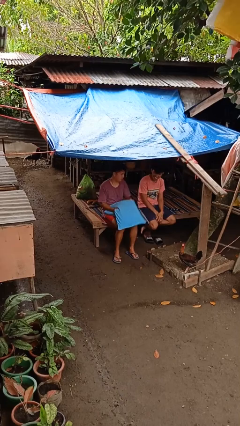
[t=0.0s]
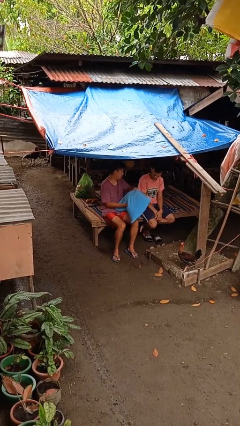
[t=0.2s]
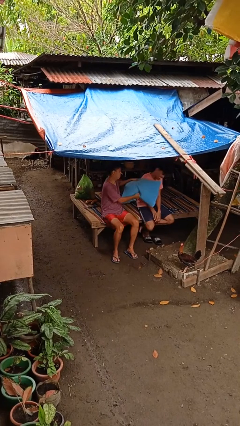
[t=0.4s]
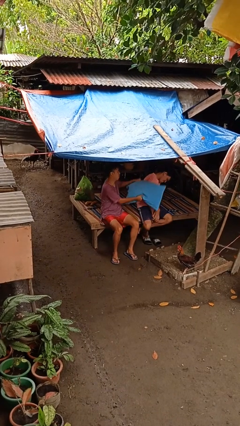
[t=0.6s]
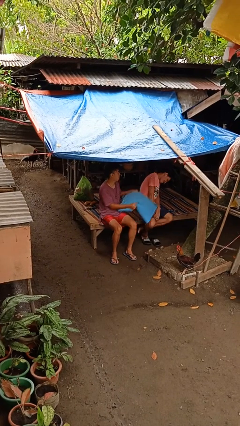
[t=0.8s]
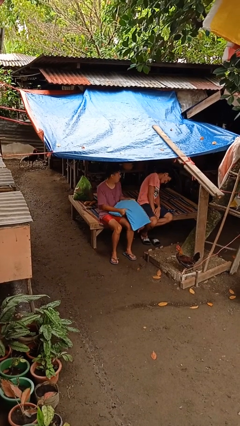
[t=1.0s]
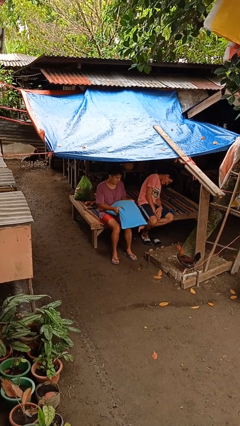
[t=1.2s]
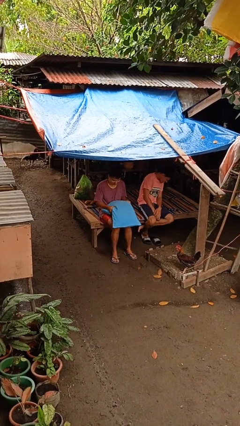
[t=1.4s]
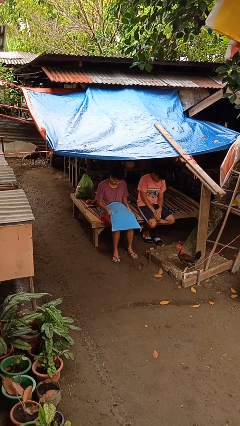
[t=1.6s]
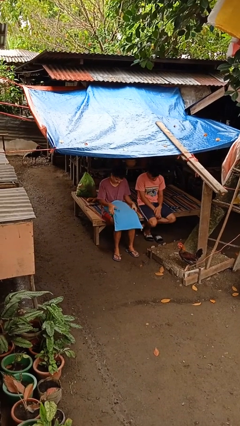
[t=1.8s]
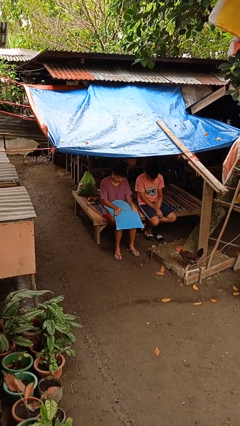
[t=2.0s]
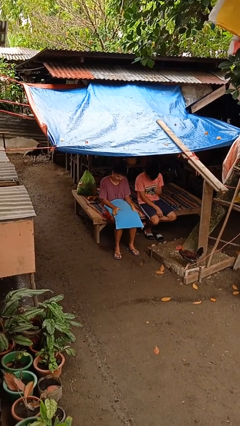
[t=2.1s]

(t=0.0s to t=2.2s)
person hits person with pillow

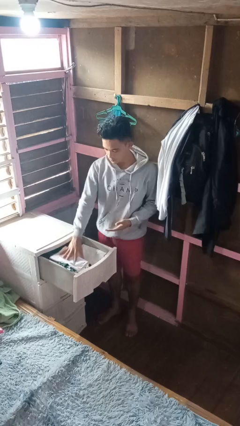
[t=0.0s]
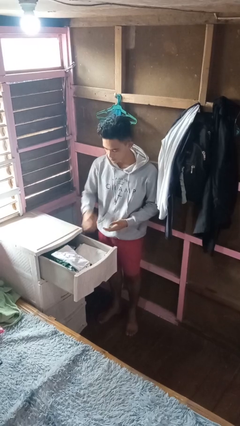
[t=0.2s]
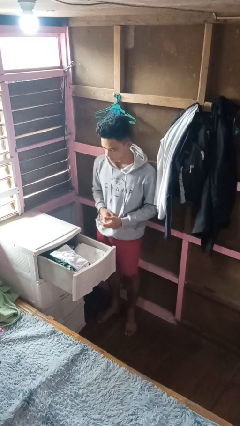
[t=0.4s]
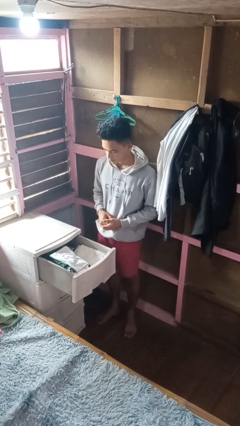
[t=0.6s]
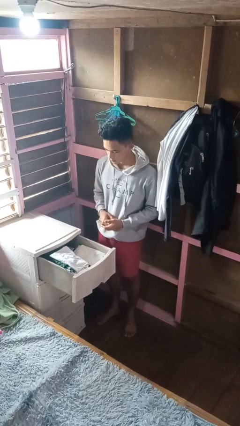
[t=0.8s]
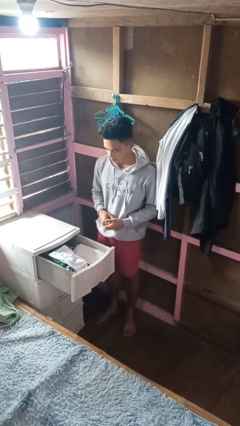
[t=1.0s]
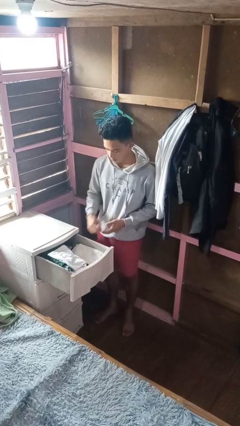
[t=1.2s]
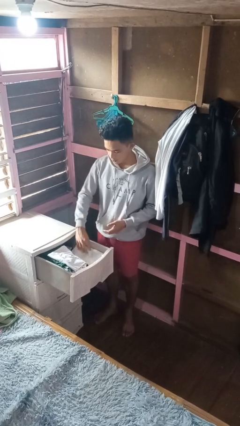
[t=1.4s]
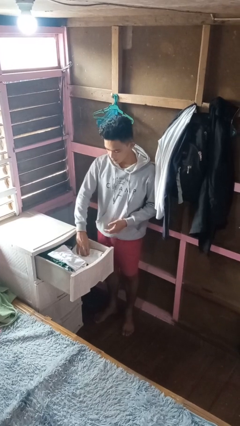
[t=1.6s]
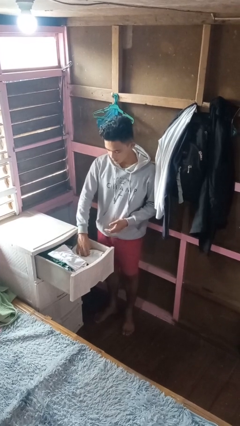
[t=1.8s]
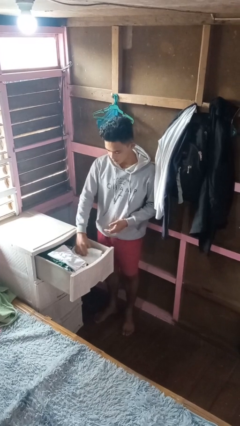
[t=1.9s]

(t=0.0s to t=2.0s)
person puts clothes into dresser

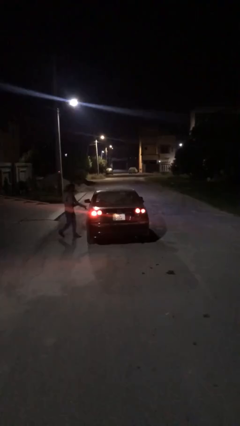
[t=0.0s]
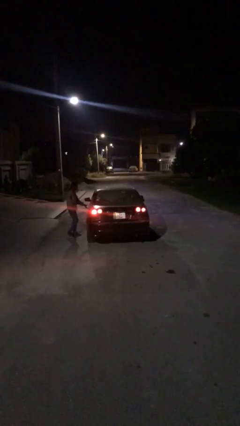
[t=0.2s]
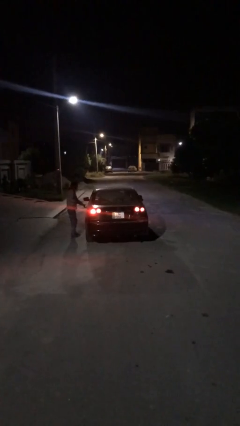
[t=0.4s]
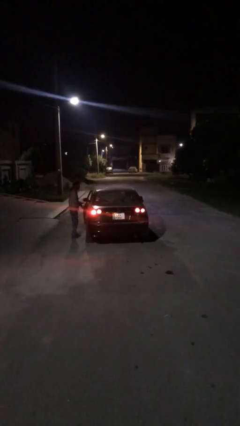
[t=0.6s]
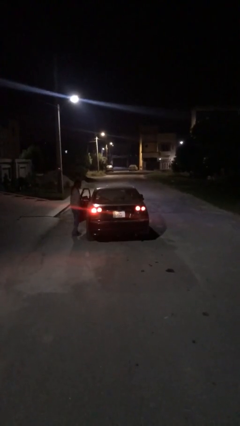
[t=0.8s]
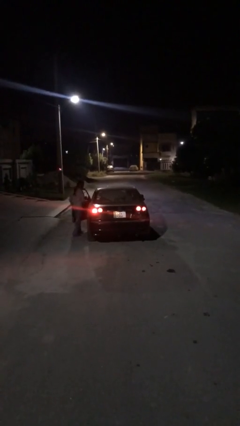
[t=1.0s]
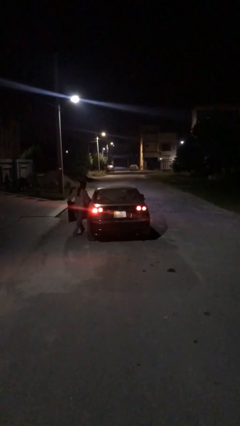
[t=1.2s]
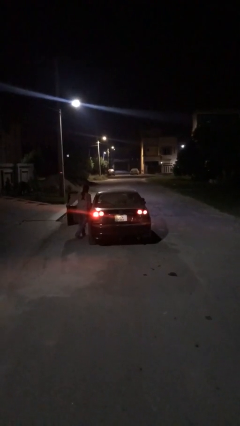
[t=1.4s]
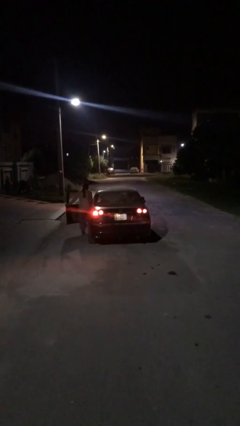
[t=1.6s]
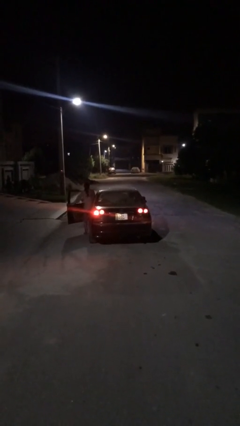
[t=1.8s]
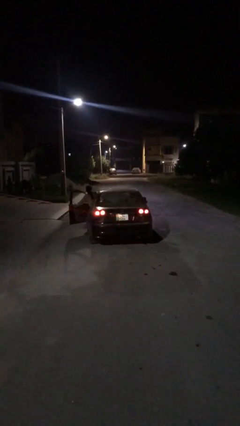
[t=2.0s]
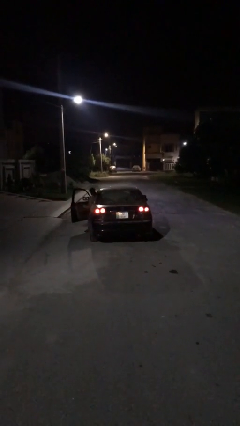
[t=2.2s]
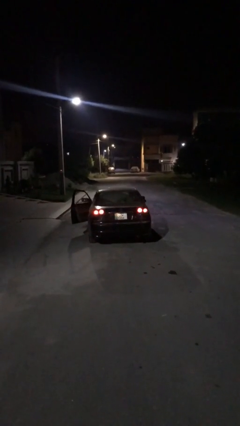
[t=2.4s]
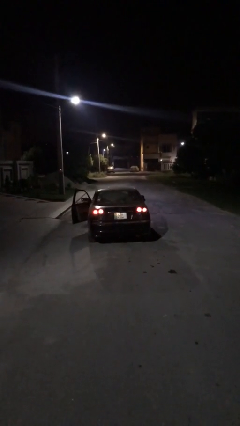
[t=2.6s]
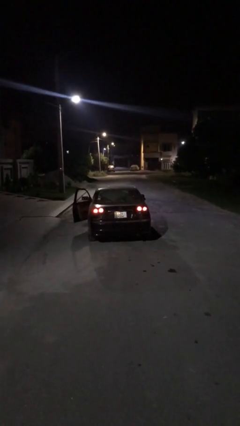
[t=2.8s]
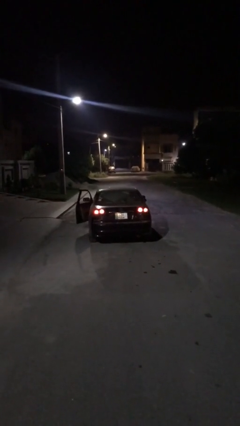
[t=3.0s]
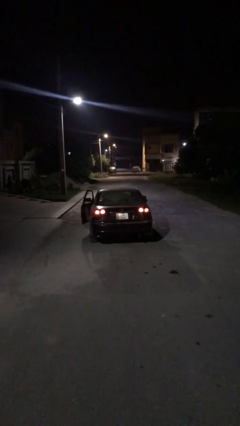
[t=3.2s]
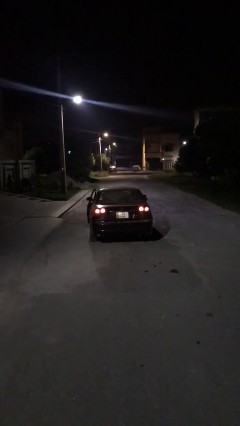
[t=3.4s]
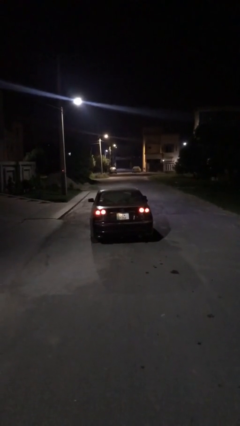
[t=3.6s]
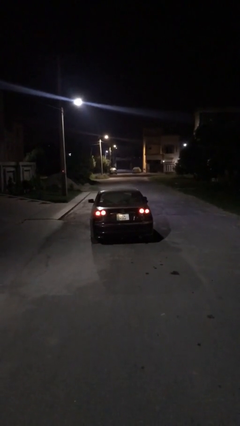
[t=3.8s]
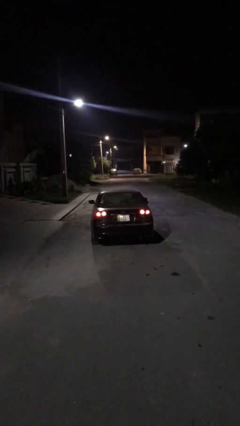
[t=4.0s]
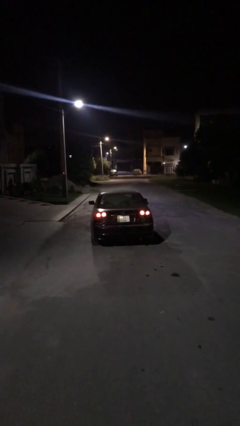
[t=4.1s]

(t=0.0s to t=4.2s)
car picks up person

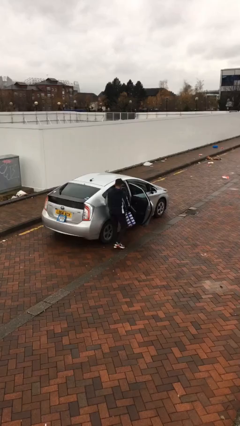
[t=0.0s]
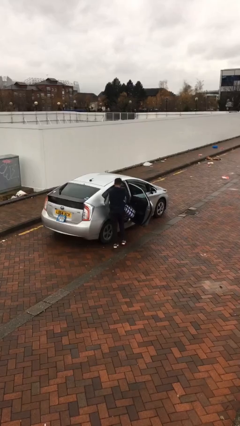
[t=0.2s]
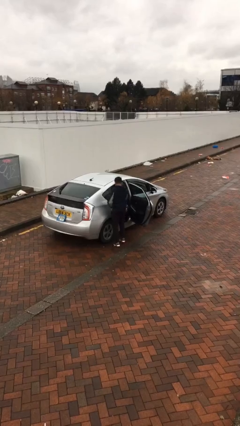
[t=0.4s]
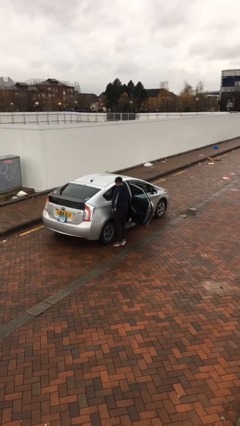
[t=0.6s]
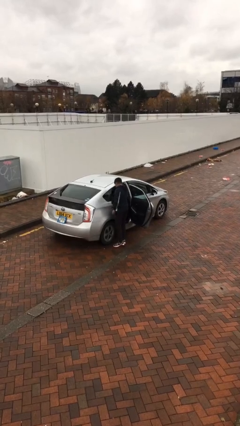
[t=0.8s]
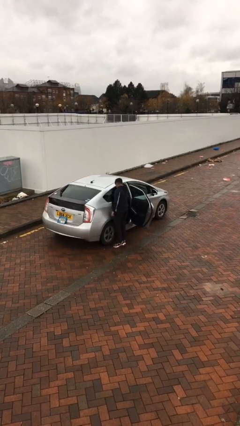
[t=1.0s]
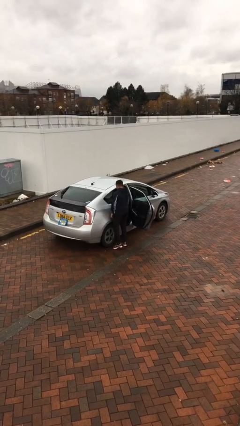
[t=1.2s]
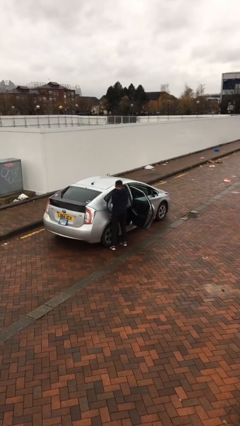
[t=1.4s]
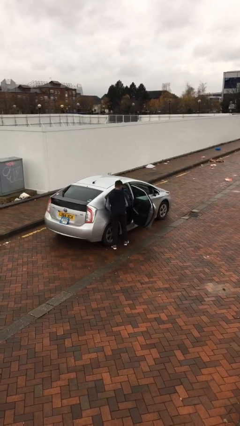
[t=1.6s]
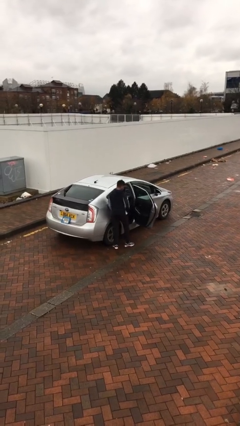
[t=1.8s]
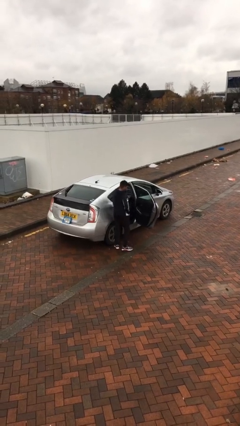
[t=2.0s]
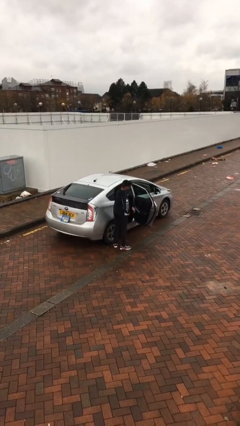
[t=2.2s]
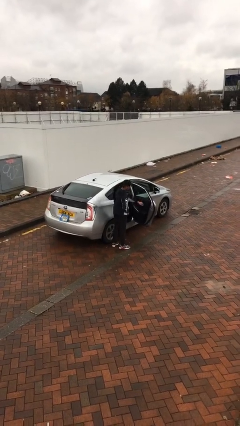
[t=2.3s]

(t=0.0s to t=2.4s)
person loads car

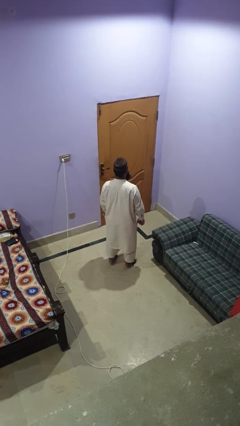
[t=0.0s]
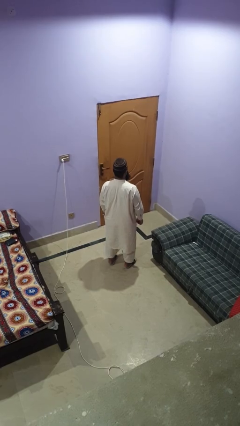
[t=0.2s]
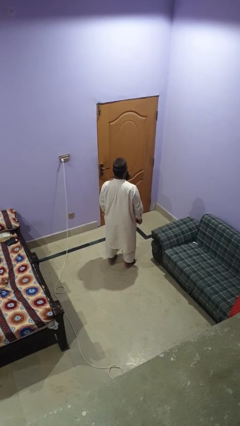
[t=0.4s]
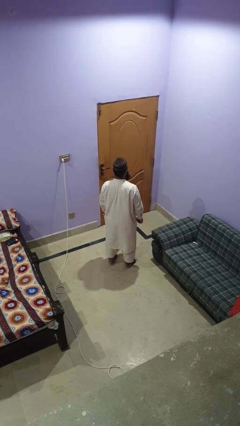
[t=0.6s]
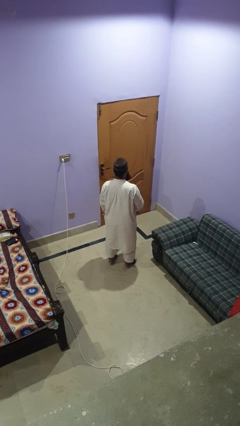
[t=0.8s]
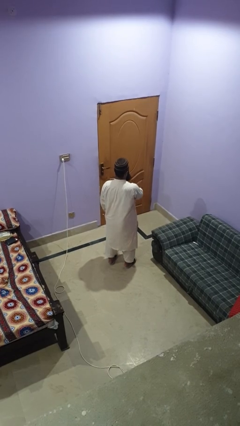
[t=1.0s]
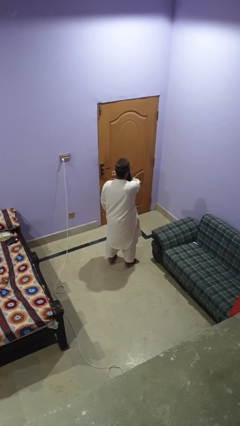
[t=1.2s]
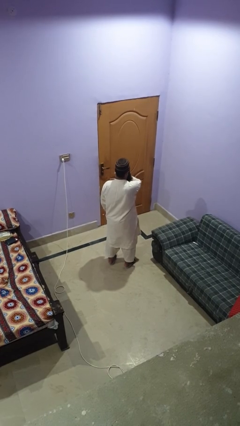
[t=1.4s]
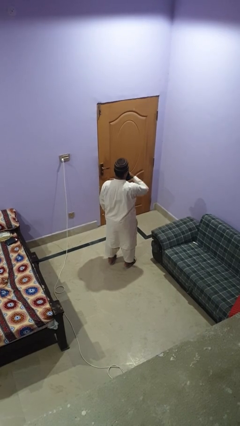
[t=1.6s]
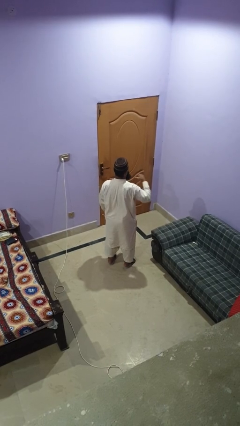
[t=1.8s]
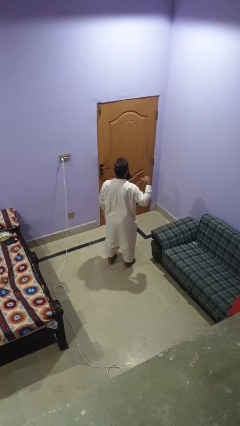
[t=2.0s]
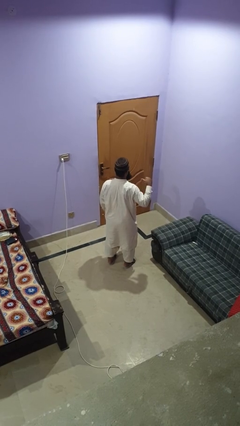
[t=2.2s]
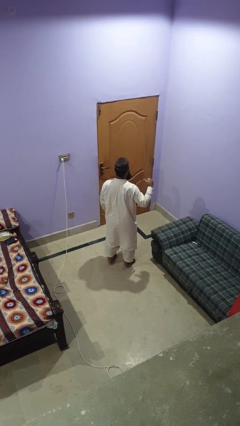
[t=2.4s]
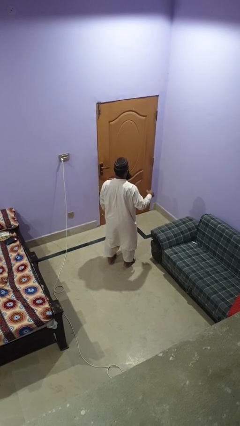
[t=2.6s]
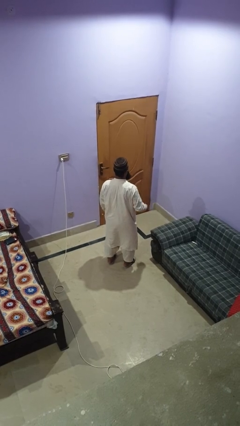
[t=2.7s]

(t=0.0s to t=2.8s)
person gestures cut

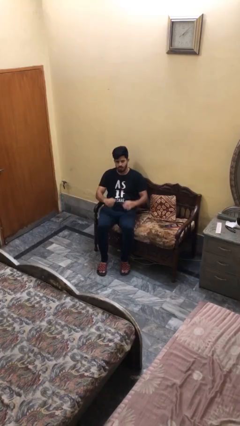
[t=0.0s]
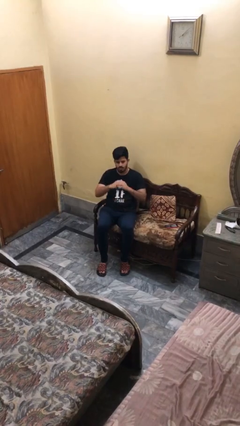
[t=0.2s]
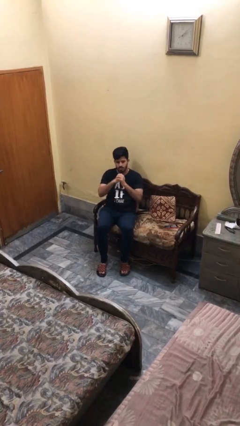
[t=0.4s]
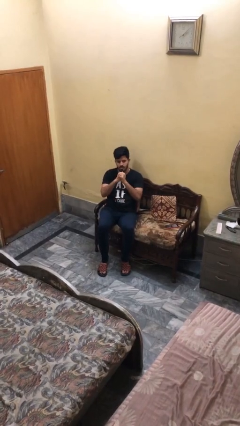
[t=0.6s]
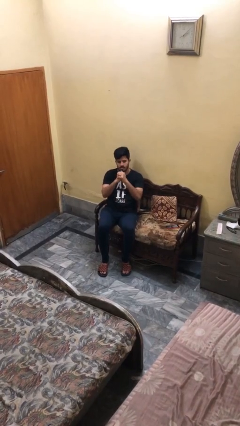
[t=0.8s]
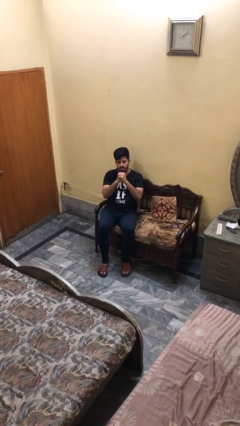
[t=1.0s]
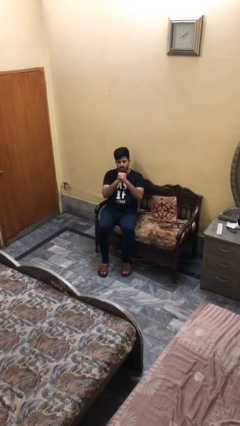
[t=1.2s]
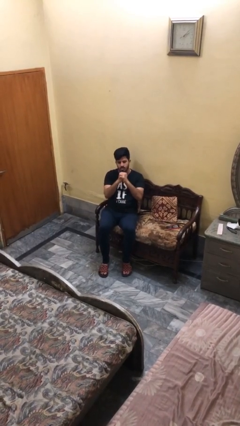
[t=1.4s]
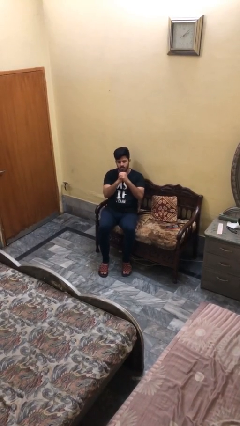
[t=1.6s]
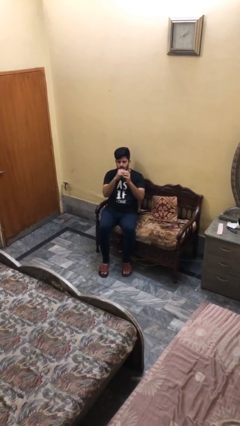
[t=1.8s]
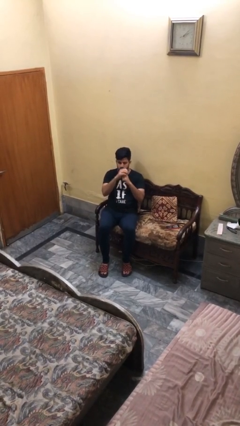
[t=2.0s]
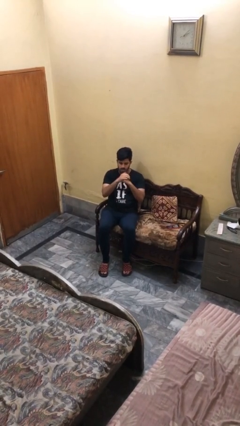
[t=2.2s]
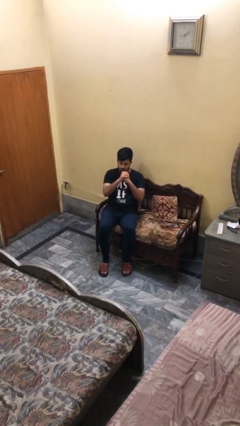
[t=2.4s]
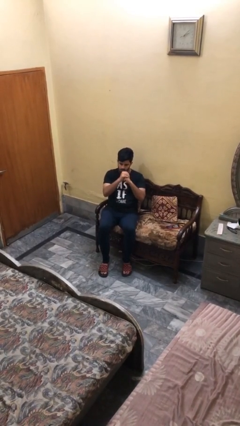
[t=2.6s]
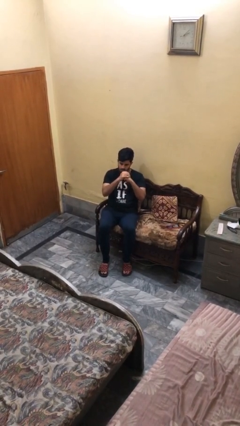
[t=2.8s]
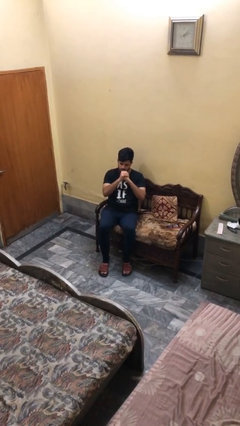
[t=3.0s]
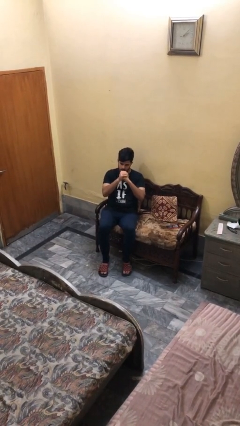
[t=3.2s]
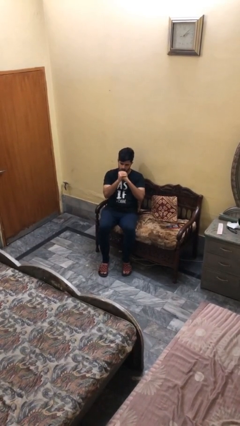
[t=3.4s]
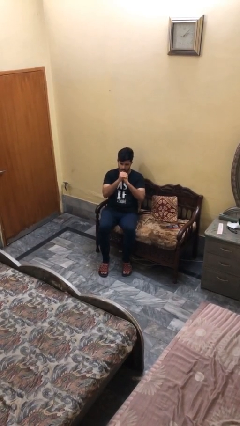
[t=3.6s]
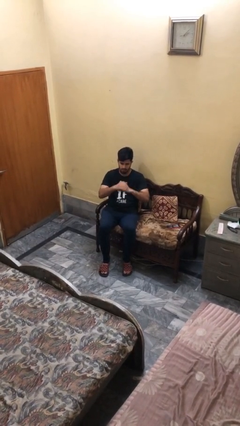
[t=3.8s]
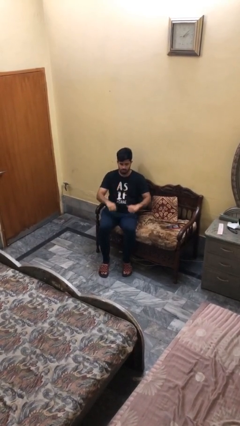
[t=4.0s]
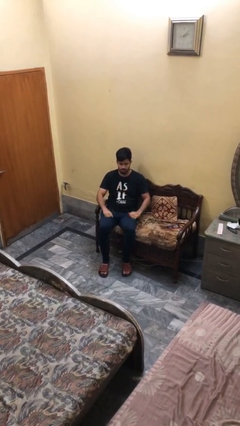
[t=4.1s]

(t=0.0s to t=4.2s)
person cracks knuckles
